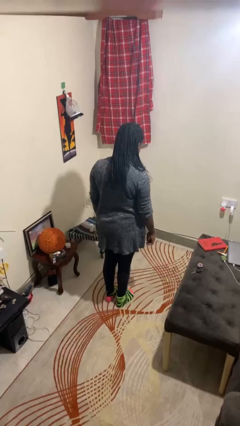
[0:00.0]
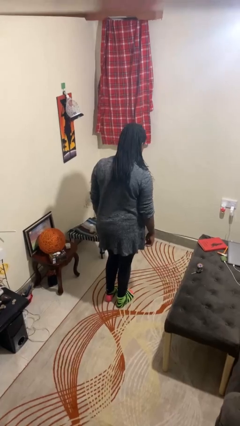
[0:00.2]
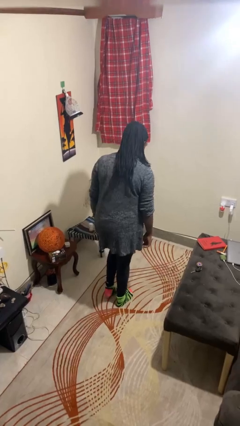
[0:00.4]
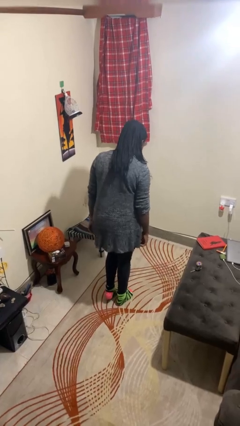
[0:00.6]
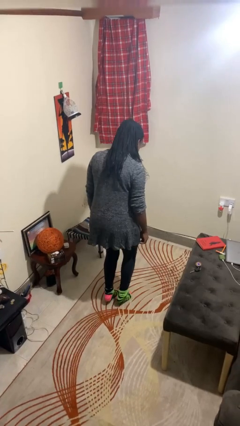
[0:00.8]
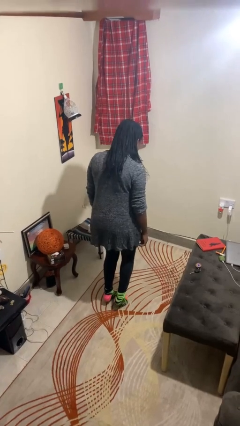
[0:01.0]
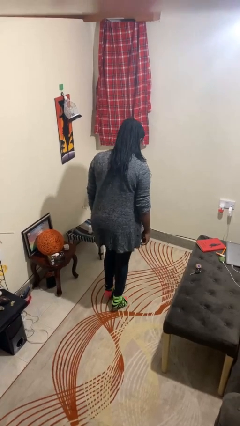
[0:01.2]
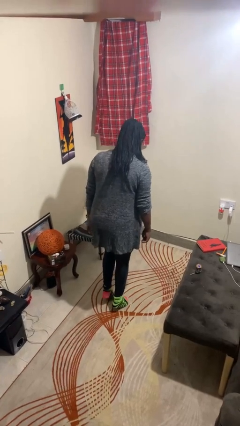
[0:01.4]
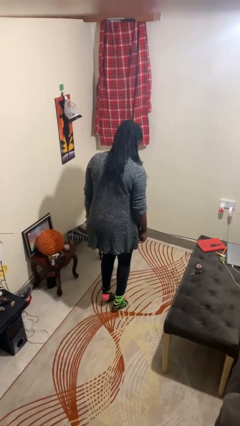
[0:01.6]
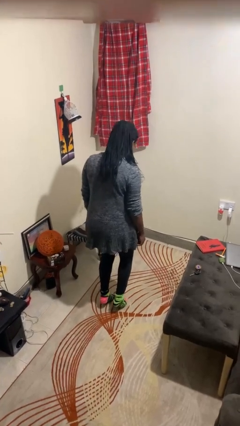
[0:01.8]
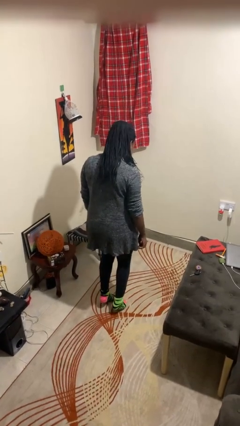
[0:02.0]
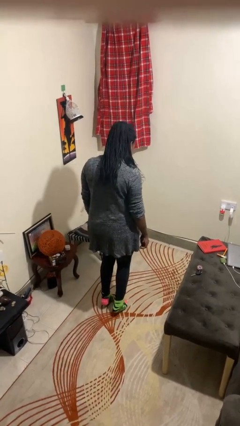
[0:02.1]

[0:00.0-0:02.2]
person walks tiptoe

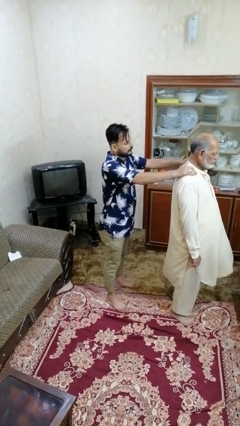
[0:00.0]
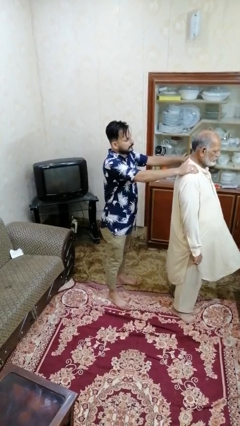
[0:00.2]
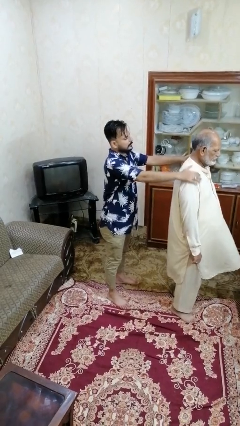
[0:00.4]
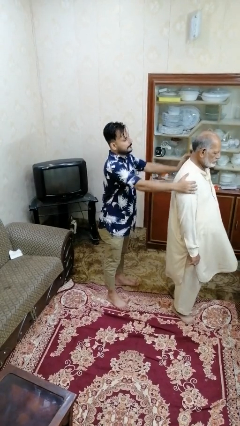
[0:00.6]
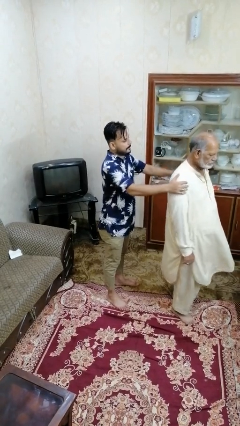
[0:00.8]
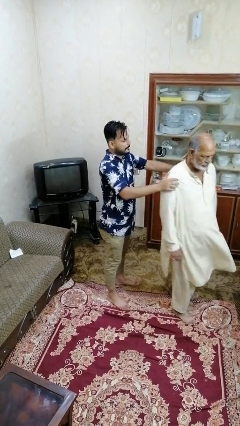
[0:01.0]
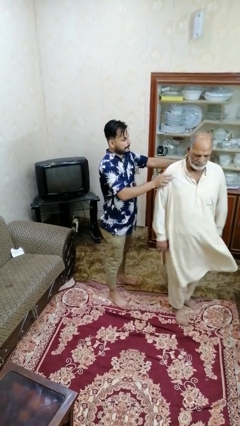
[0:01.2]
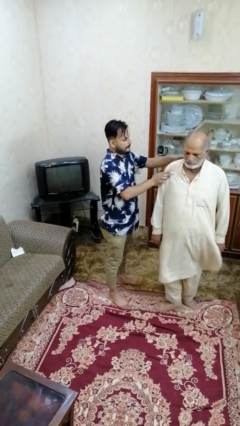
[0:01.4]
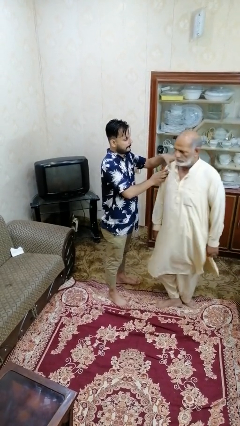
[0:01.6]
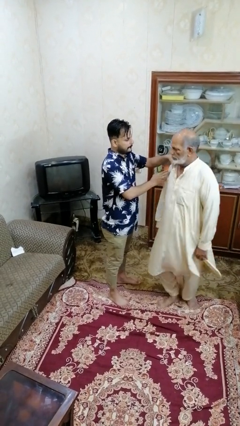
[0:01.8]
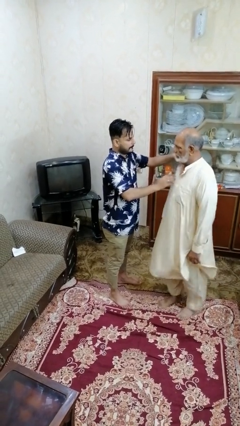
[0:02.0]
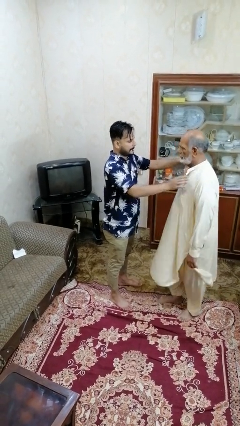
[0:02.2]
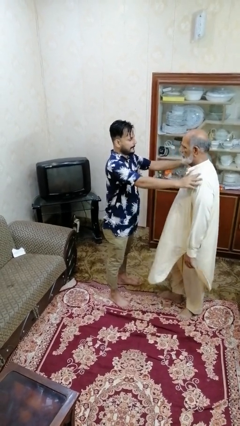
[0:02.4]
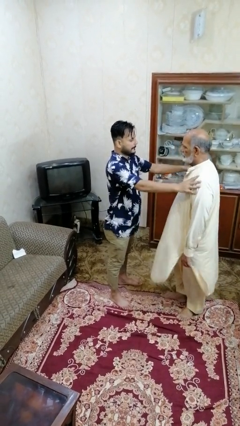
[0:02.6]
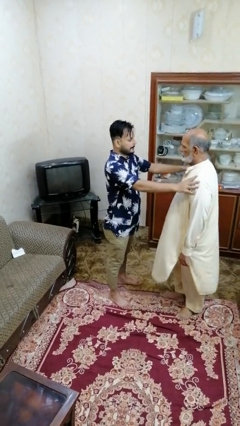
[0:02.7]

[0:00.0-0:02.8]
person spins person around

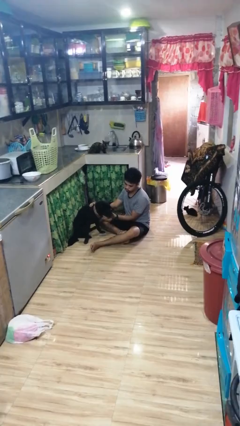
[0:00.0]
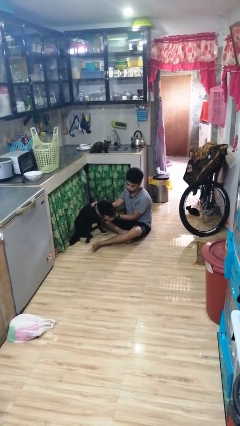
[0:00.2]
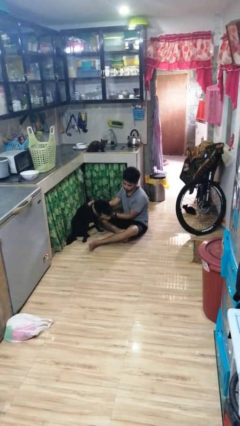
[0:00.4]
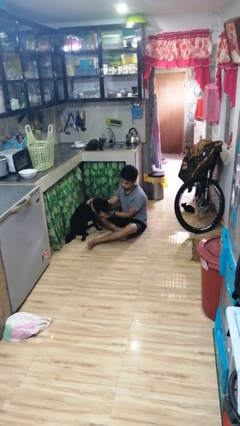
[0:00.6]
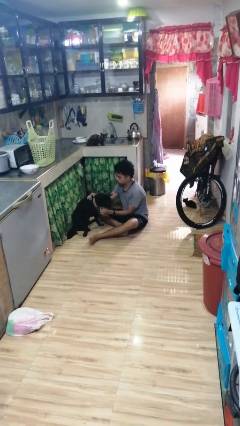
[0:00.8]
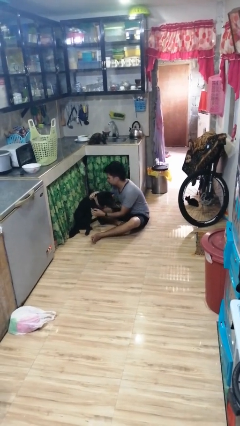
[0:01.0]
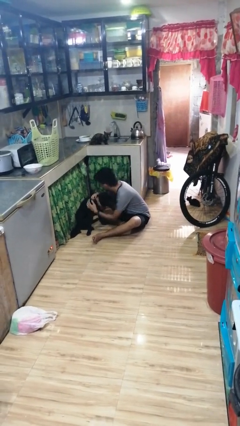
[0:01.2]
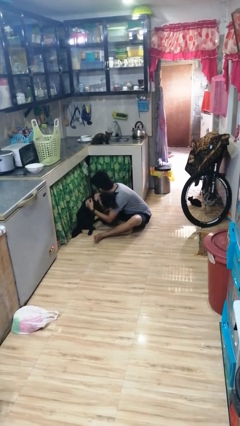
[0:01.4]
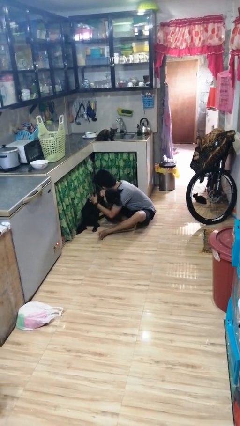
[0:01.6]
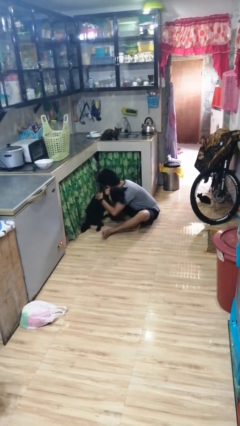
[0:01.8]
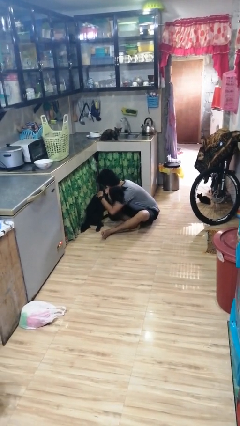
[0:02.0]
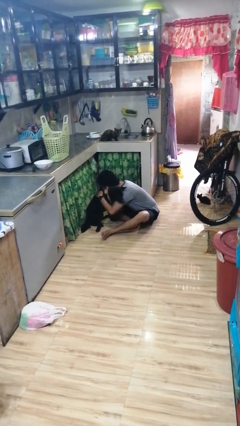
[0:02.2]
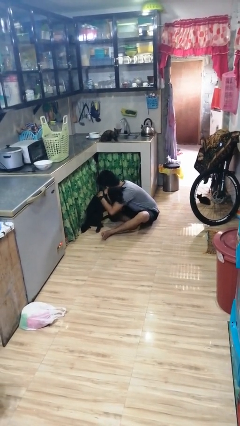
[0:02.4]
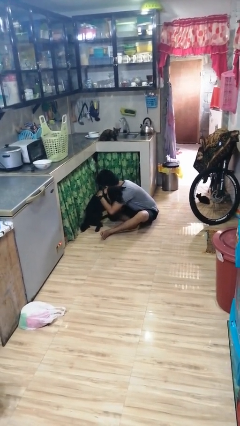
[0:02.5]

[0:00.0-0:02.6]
person hugs dog

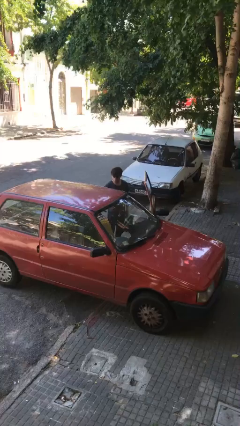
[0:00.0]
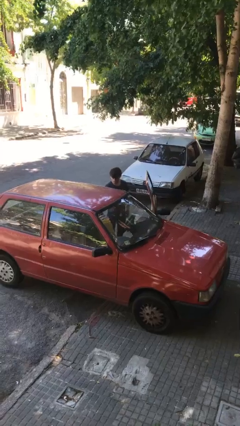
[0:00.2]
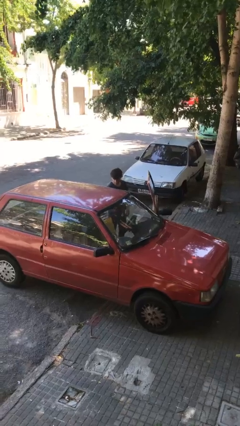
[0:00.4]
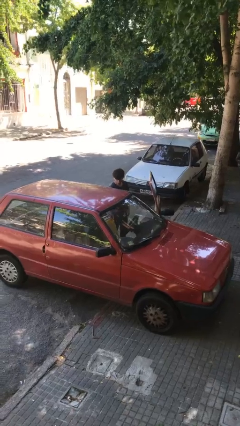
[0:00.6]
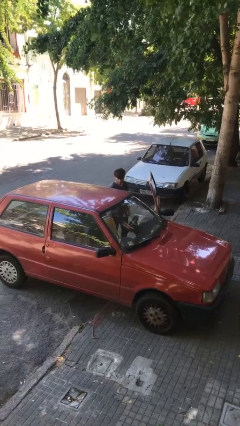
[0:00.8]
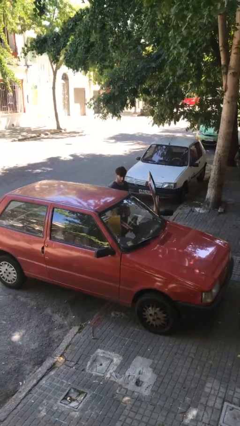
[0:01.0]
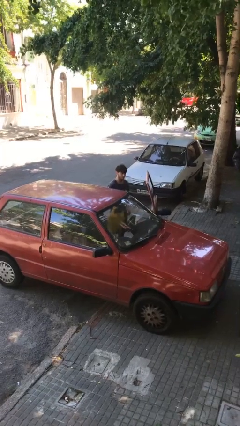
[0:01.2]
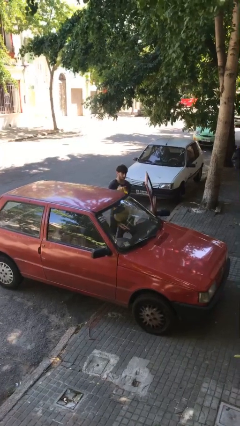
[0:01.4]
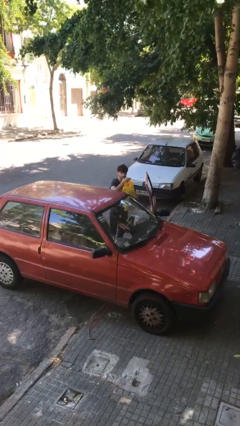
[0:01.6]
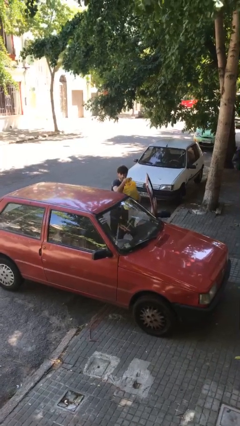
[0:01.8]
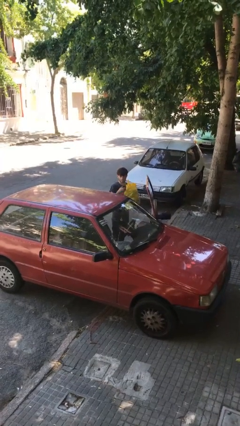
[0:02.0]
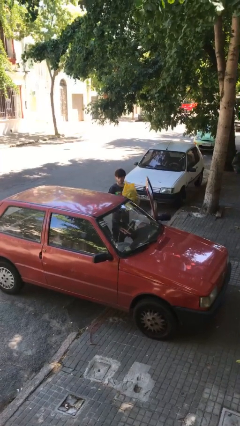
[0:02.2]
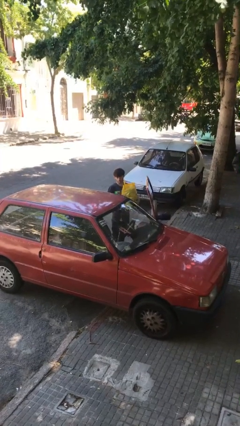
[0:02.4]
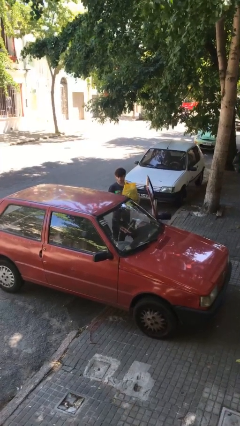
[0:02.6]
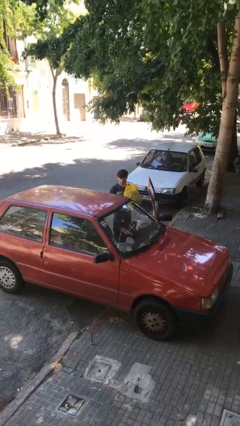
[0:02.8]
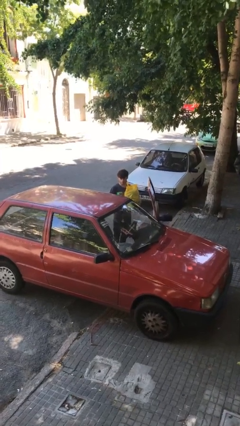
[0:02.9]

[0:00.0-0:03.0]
person unloads car

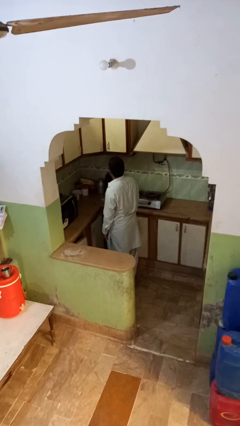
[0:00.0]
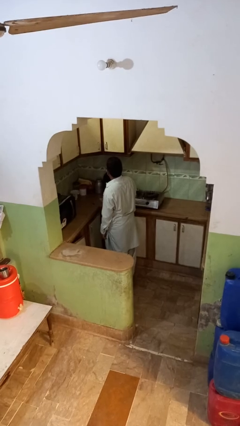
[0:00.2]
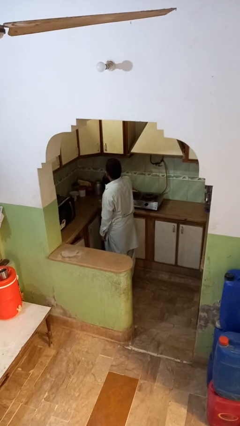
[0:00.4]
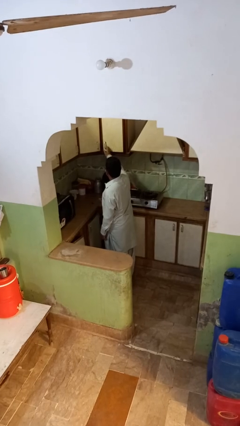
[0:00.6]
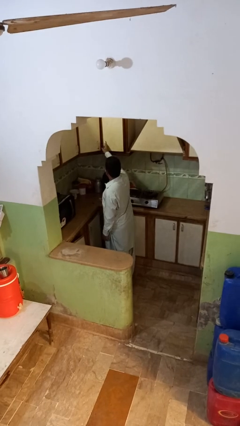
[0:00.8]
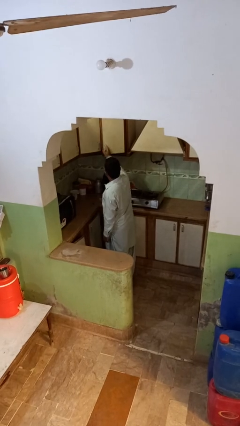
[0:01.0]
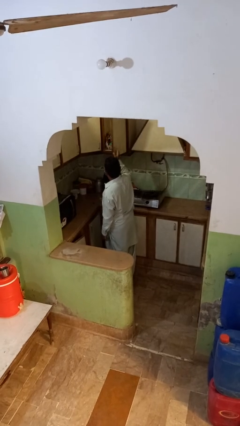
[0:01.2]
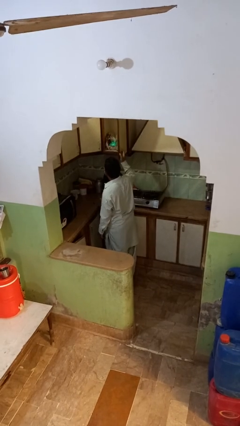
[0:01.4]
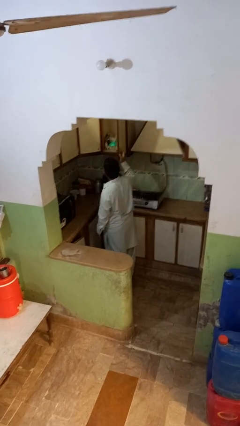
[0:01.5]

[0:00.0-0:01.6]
person opens cabinet

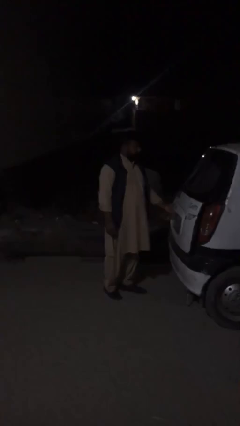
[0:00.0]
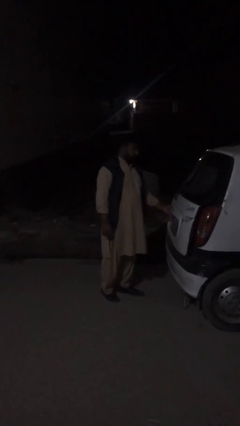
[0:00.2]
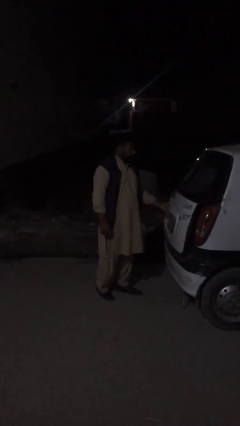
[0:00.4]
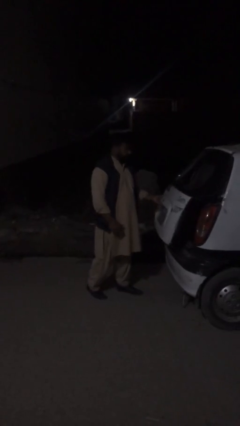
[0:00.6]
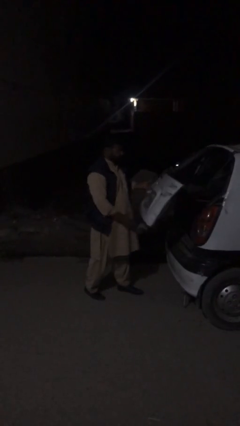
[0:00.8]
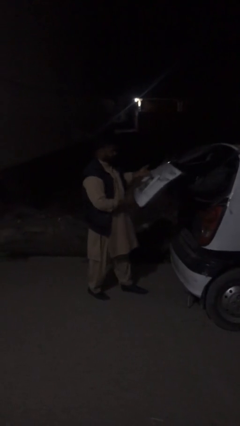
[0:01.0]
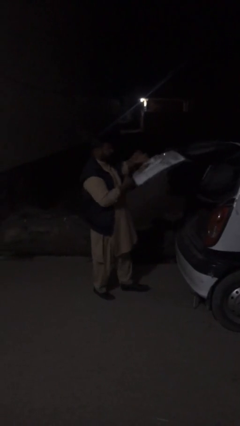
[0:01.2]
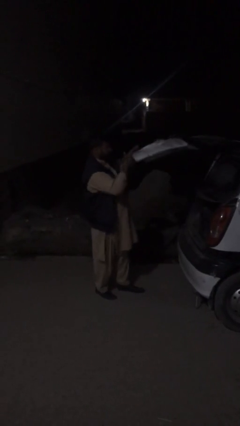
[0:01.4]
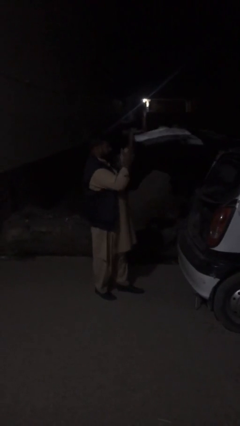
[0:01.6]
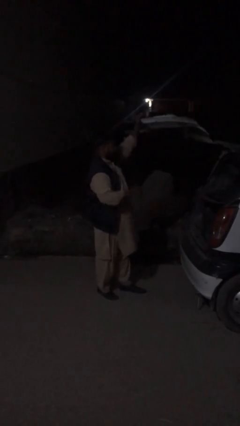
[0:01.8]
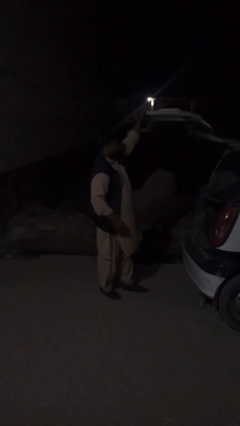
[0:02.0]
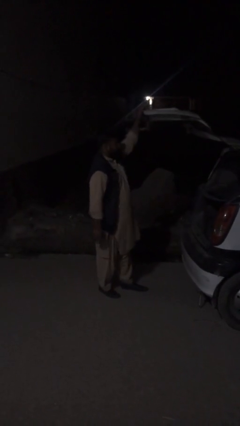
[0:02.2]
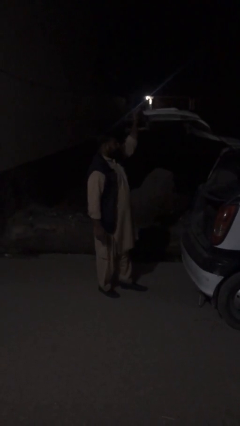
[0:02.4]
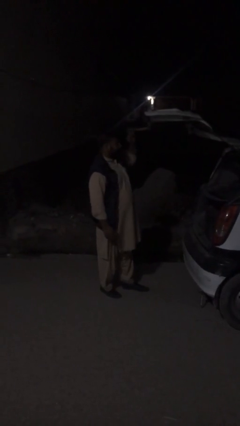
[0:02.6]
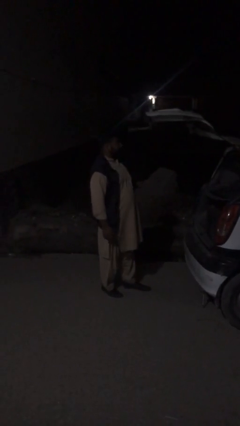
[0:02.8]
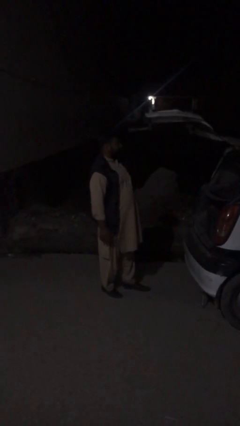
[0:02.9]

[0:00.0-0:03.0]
person opens car trunk

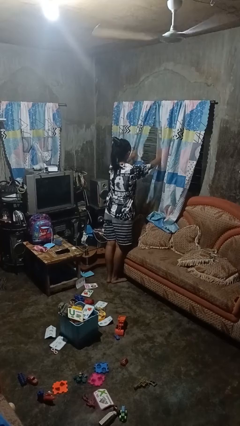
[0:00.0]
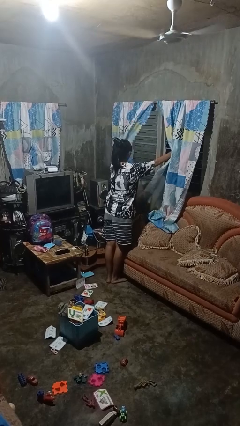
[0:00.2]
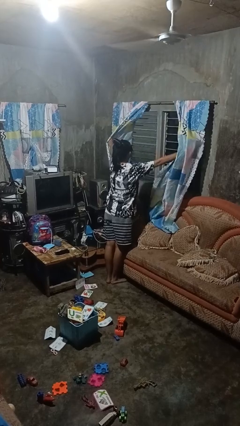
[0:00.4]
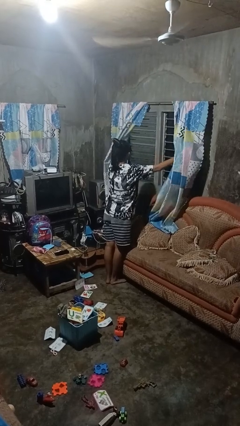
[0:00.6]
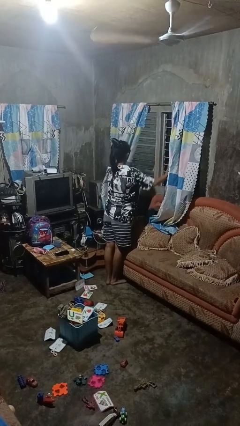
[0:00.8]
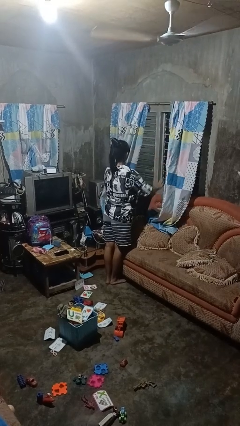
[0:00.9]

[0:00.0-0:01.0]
person opens curtains

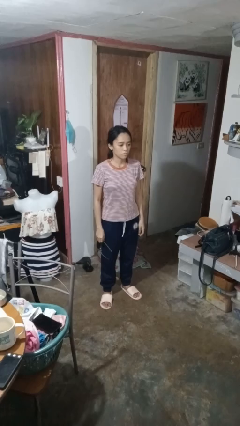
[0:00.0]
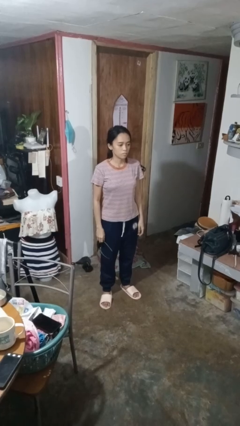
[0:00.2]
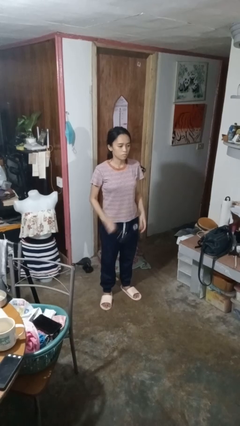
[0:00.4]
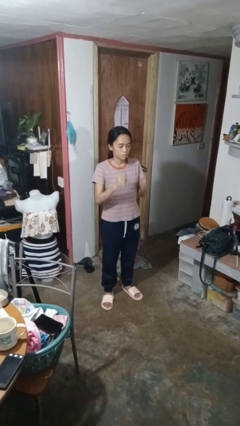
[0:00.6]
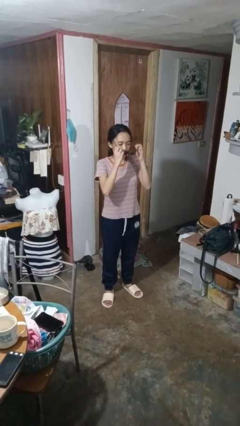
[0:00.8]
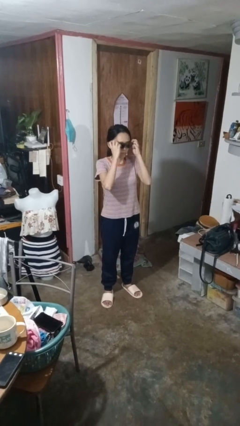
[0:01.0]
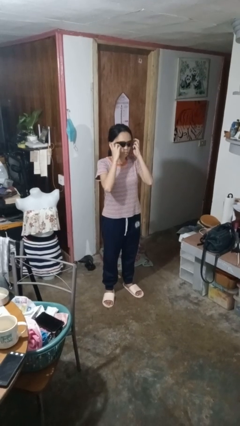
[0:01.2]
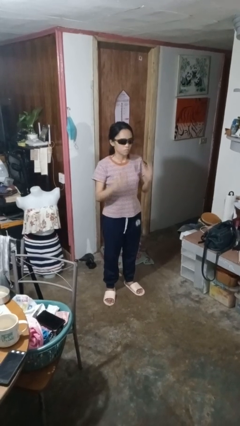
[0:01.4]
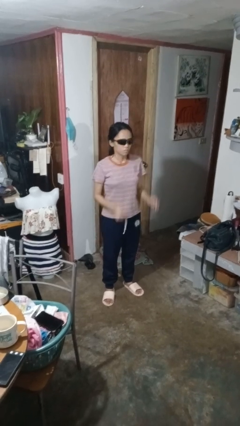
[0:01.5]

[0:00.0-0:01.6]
person puts on sunglasses
